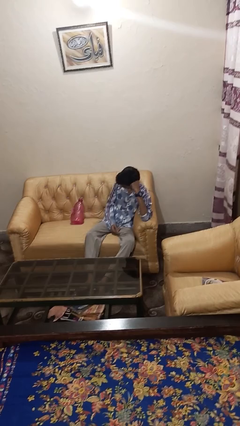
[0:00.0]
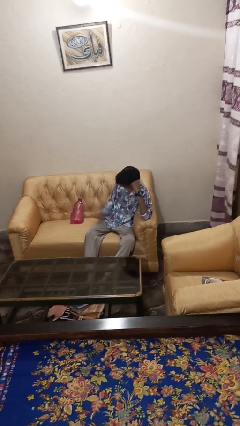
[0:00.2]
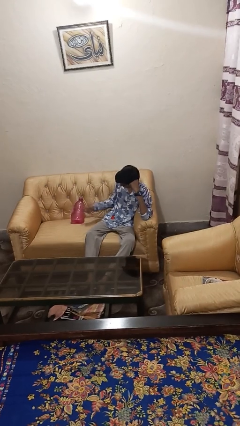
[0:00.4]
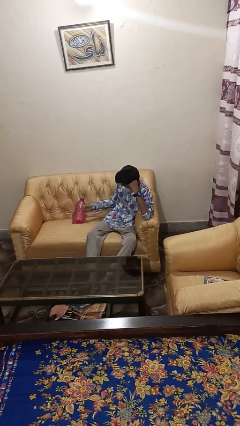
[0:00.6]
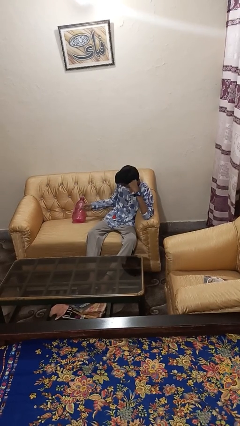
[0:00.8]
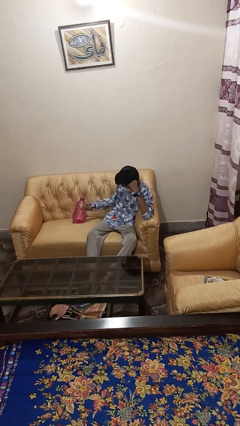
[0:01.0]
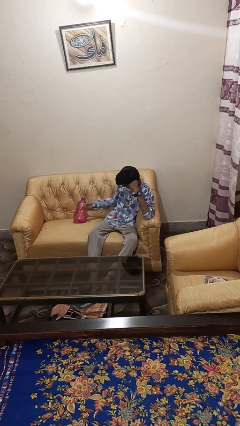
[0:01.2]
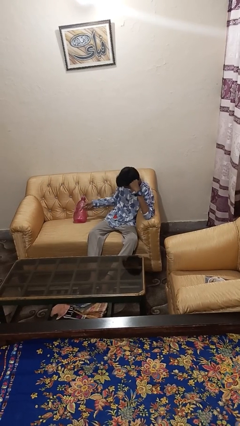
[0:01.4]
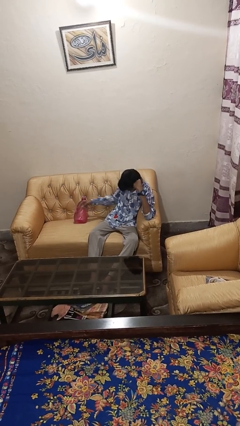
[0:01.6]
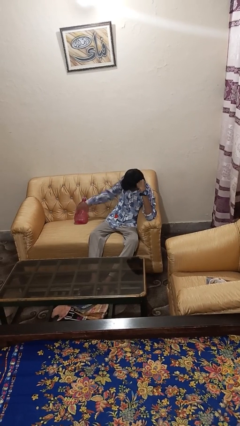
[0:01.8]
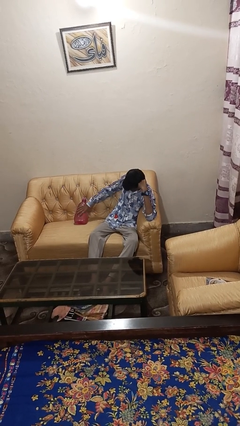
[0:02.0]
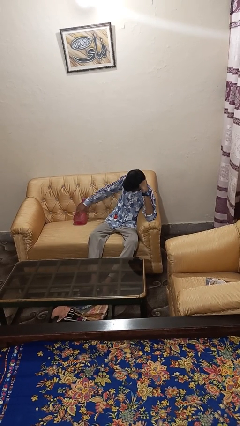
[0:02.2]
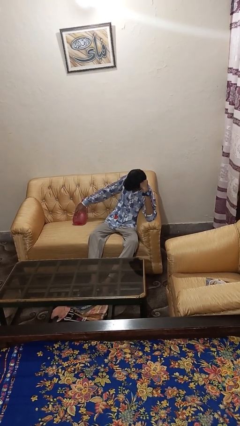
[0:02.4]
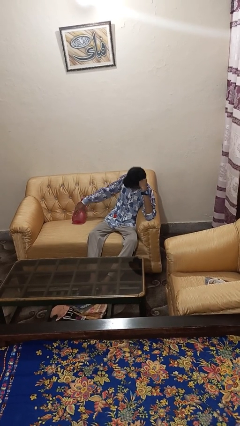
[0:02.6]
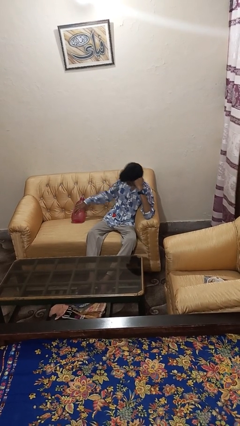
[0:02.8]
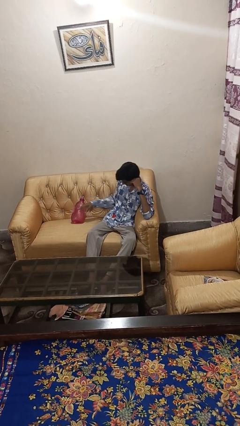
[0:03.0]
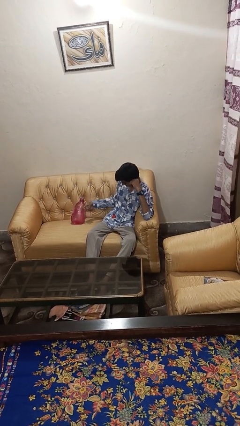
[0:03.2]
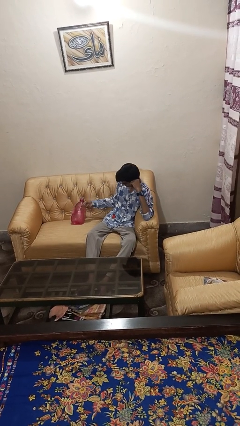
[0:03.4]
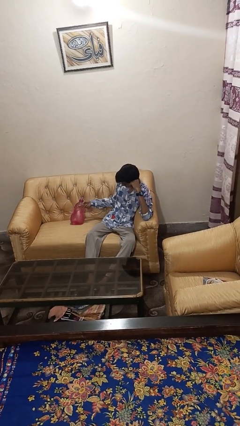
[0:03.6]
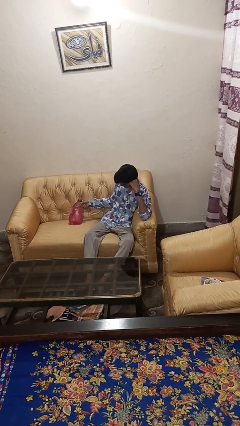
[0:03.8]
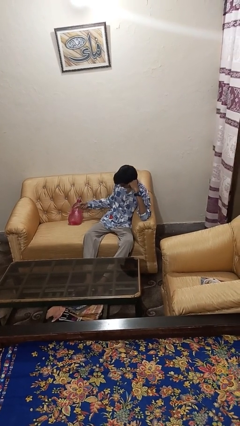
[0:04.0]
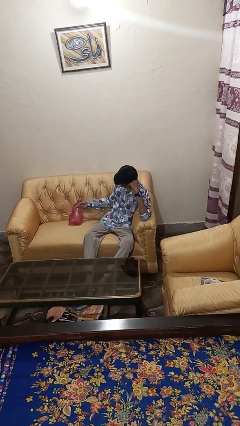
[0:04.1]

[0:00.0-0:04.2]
person taps object with finger

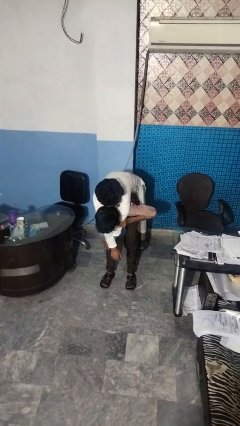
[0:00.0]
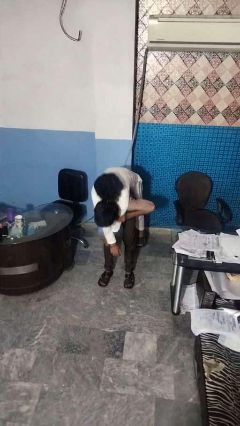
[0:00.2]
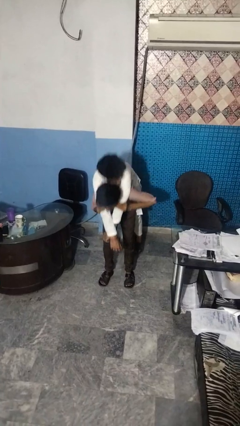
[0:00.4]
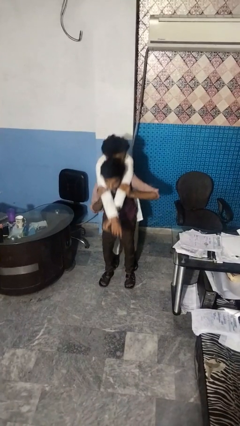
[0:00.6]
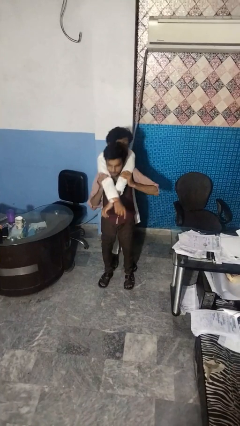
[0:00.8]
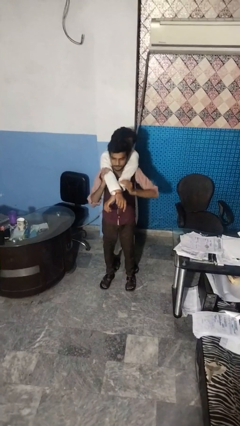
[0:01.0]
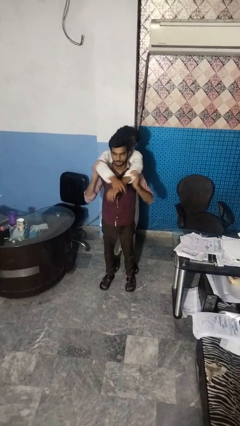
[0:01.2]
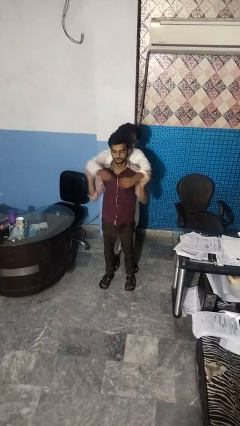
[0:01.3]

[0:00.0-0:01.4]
person puts down person

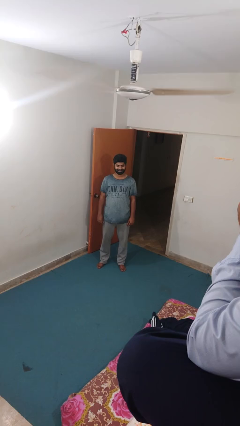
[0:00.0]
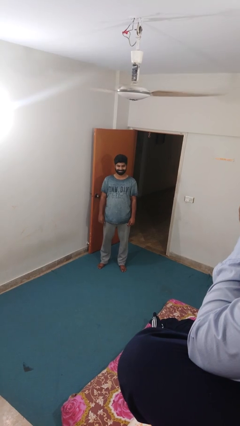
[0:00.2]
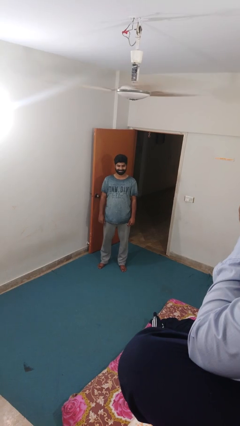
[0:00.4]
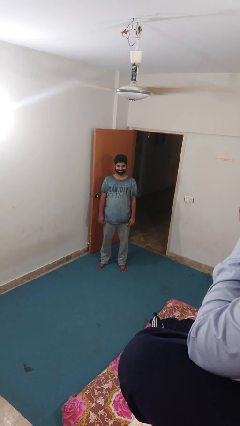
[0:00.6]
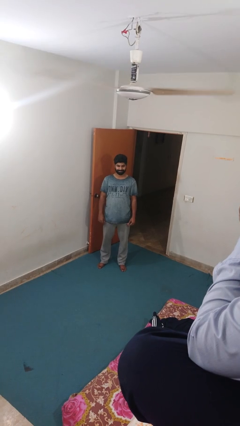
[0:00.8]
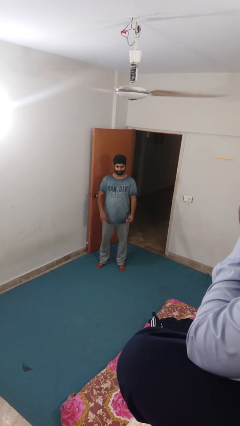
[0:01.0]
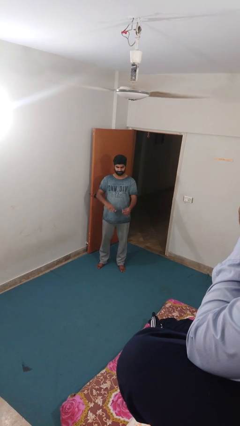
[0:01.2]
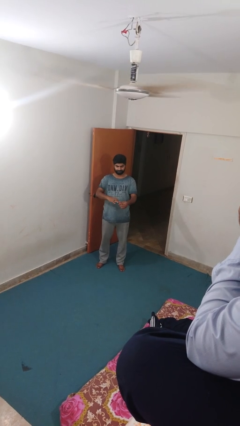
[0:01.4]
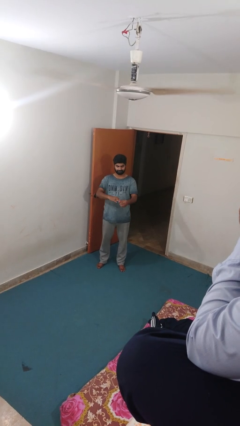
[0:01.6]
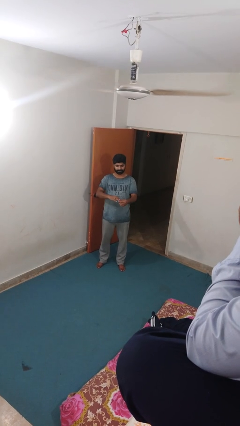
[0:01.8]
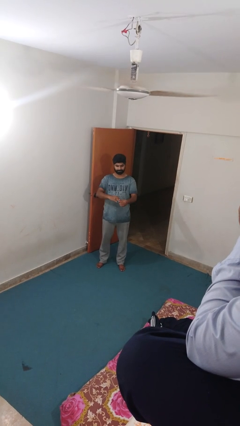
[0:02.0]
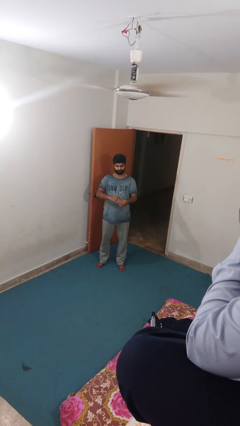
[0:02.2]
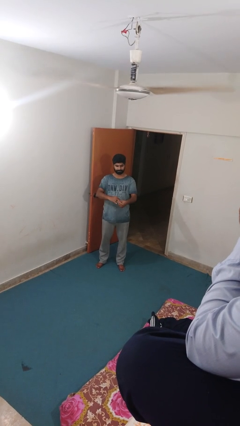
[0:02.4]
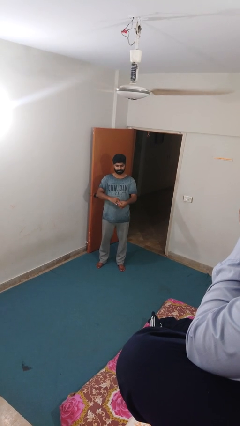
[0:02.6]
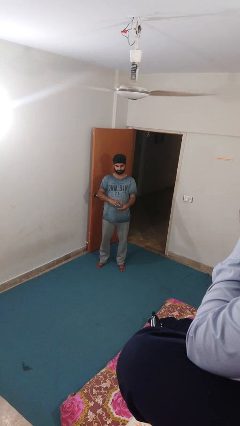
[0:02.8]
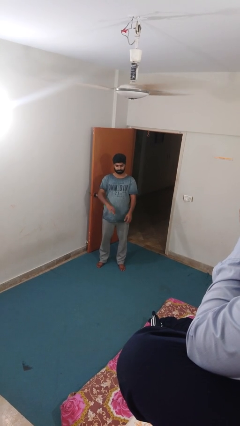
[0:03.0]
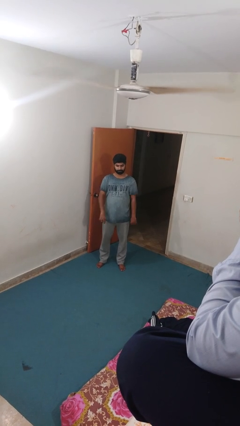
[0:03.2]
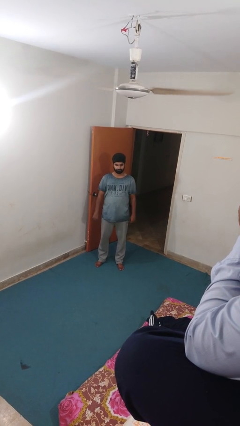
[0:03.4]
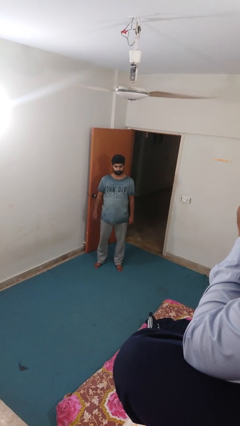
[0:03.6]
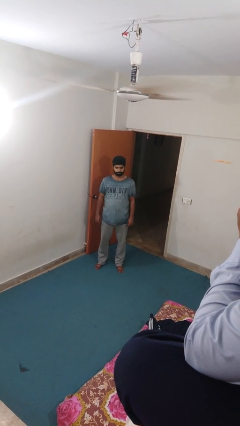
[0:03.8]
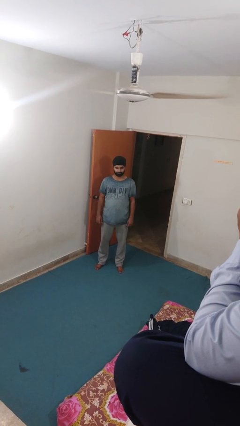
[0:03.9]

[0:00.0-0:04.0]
person puts on ring

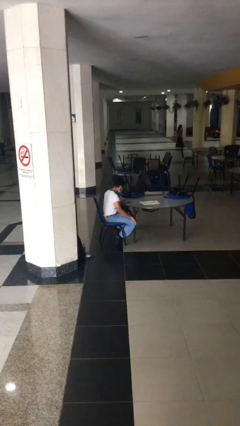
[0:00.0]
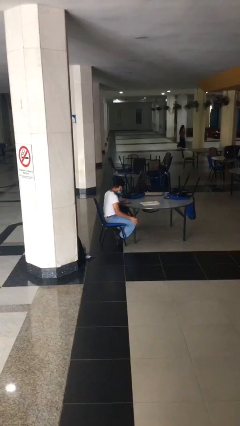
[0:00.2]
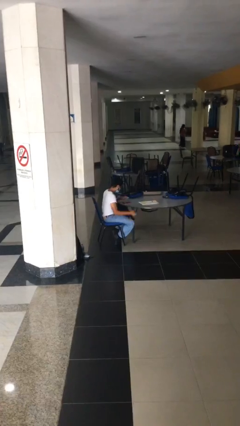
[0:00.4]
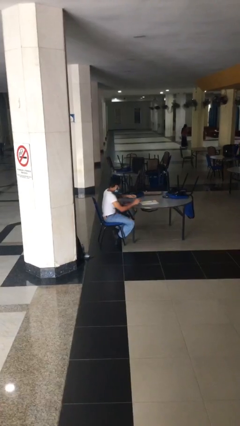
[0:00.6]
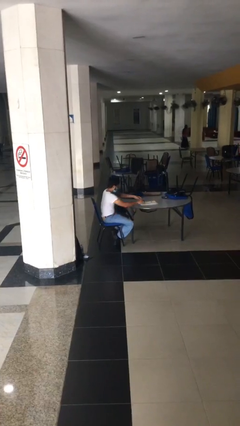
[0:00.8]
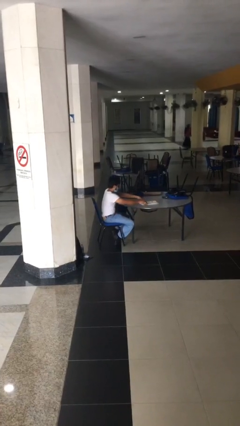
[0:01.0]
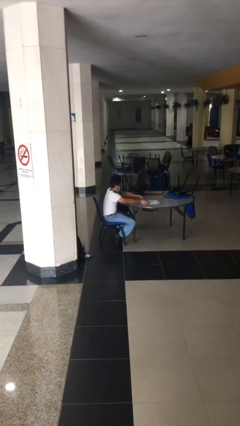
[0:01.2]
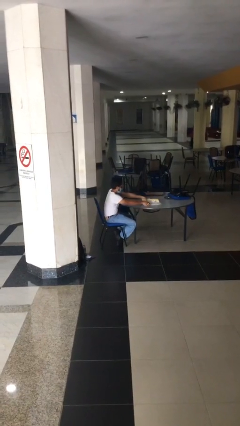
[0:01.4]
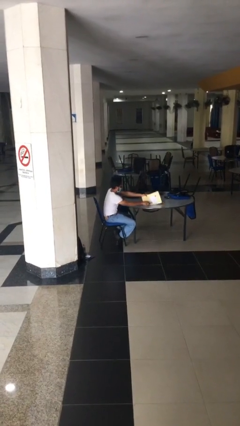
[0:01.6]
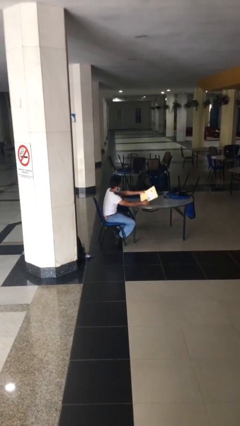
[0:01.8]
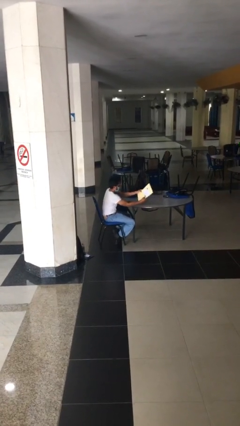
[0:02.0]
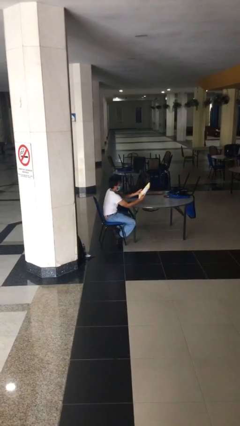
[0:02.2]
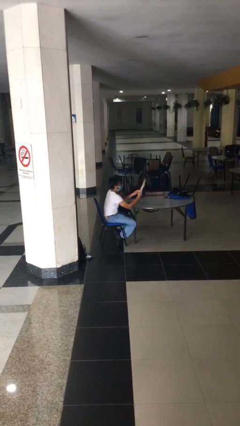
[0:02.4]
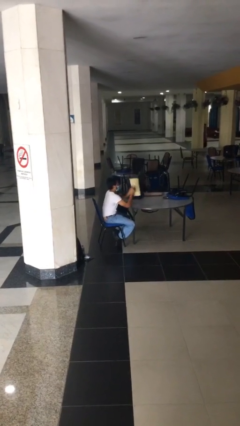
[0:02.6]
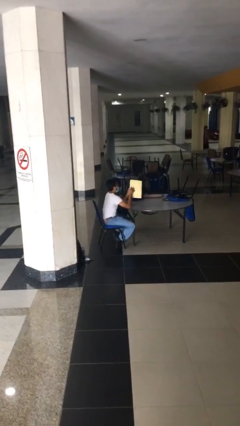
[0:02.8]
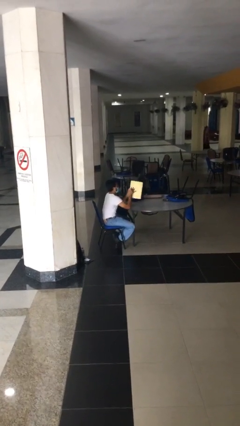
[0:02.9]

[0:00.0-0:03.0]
person picks up object from table

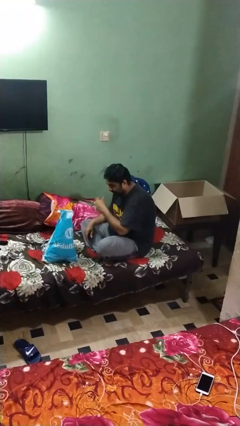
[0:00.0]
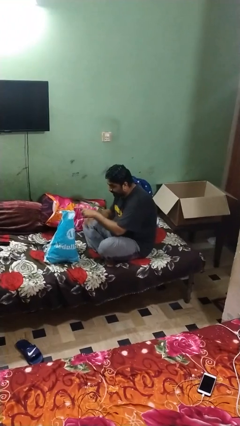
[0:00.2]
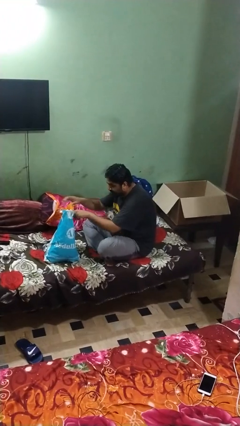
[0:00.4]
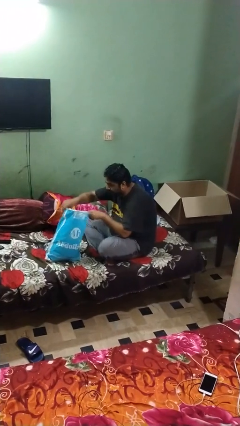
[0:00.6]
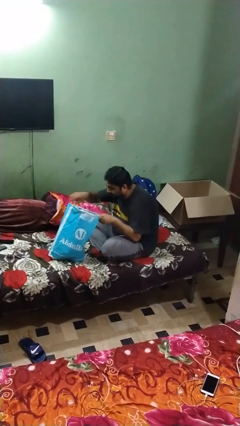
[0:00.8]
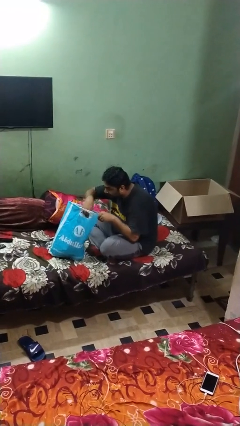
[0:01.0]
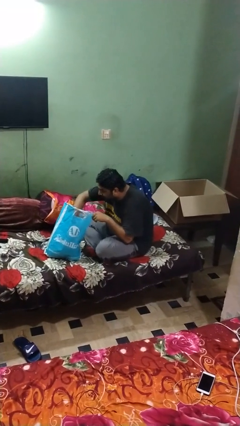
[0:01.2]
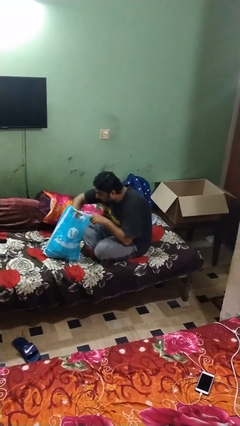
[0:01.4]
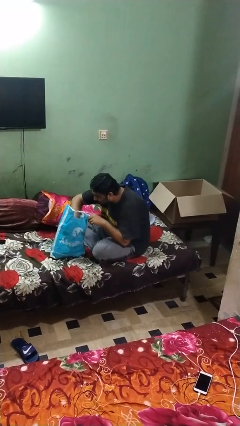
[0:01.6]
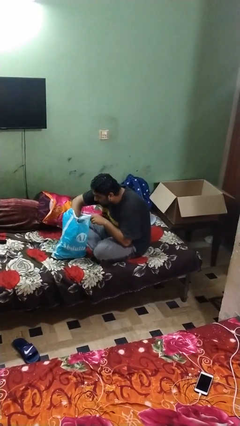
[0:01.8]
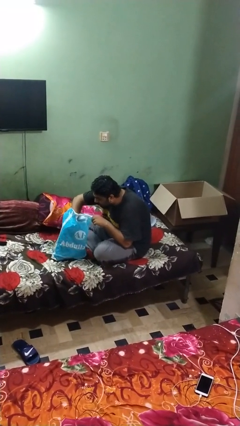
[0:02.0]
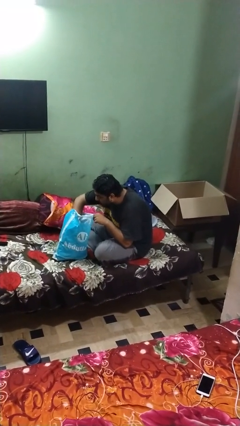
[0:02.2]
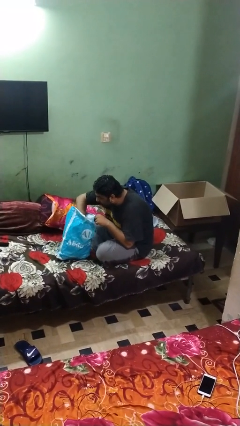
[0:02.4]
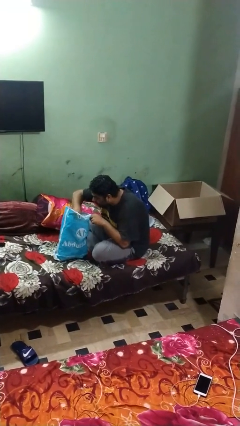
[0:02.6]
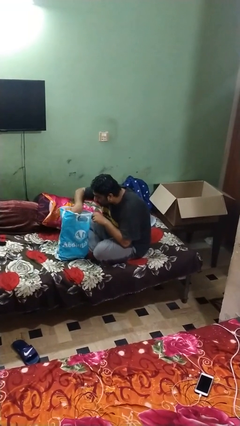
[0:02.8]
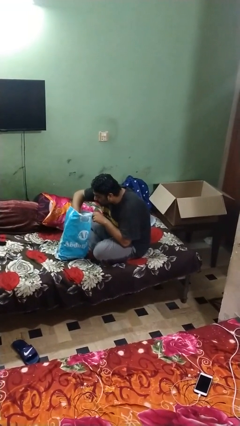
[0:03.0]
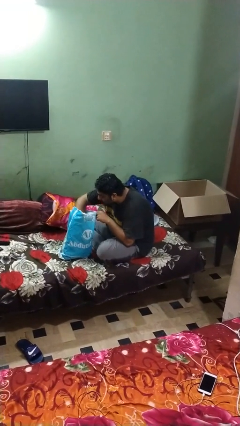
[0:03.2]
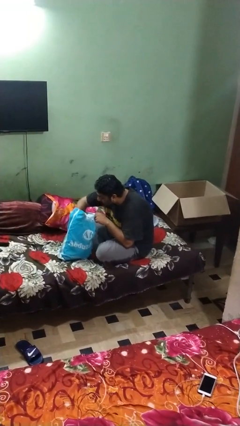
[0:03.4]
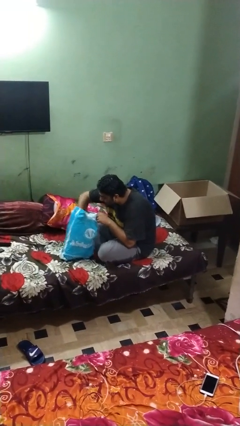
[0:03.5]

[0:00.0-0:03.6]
person searches in bag

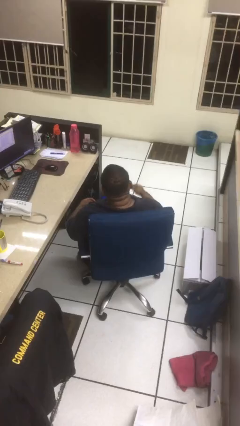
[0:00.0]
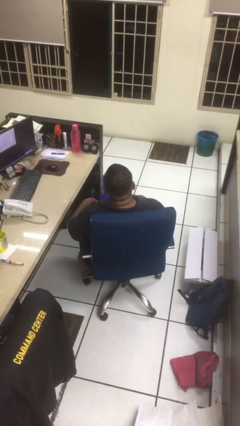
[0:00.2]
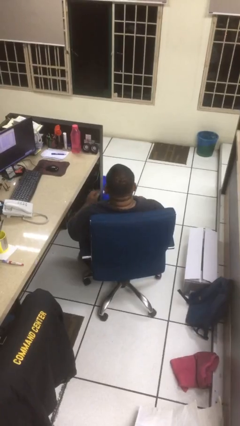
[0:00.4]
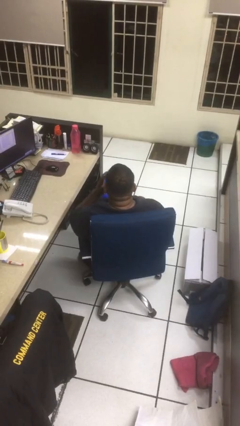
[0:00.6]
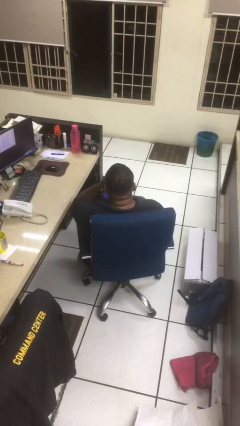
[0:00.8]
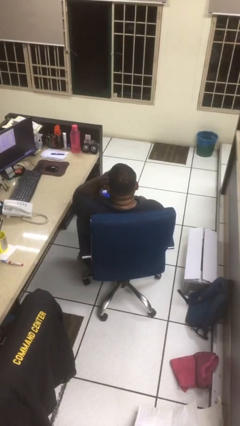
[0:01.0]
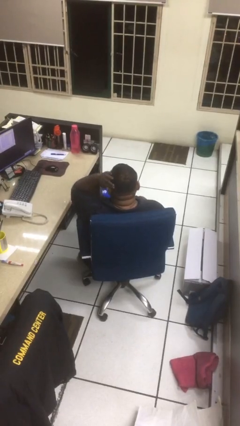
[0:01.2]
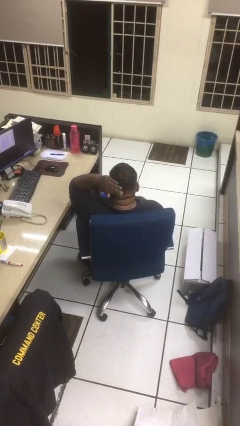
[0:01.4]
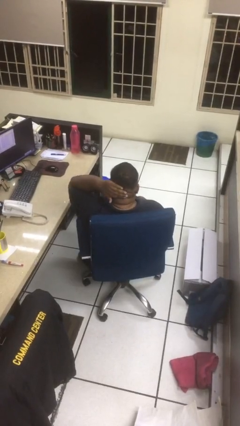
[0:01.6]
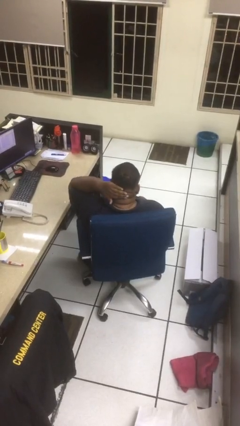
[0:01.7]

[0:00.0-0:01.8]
person strokes hair
